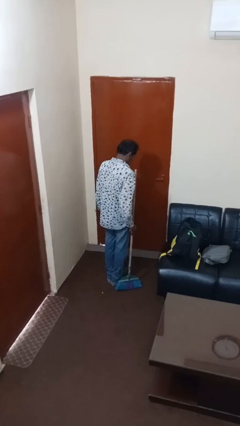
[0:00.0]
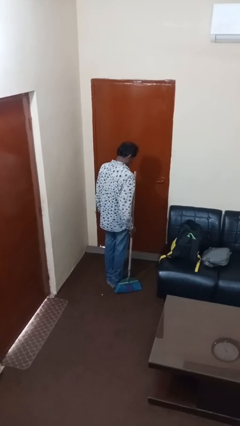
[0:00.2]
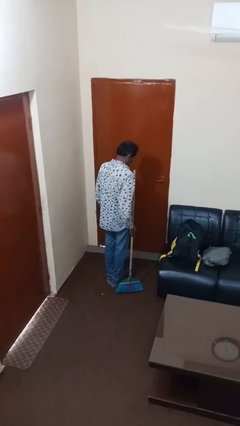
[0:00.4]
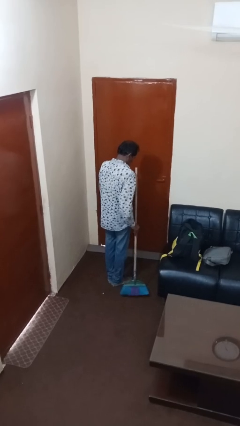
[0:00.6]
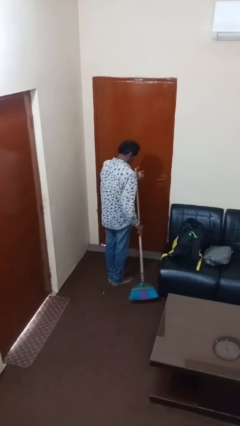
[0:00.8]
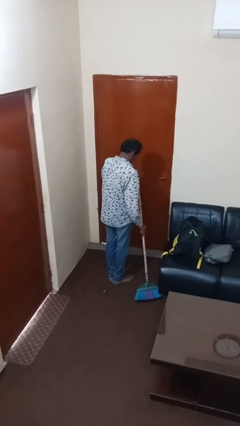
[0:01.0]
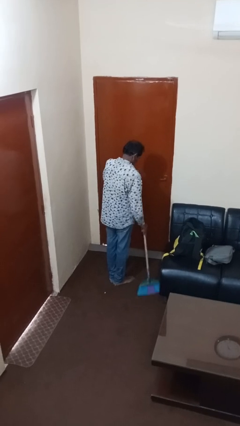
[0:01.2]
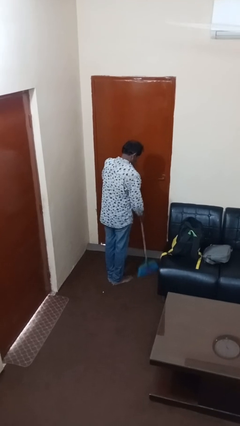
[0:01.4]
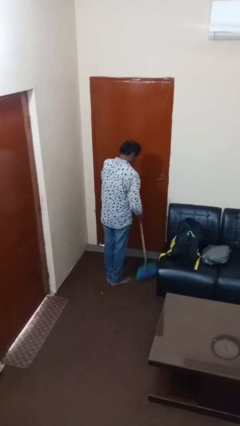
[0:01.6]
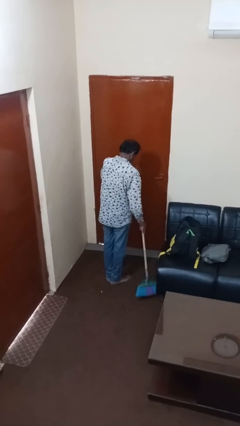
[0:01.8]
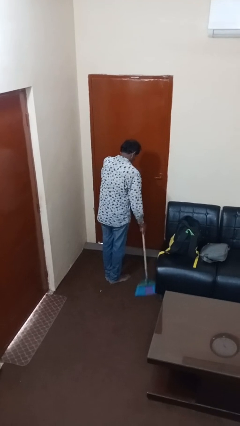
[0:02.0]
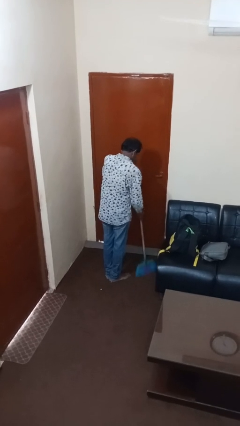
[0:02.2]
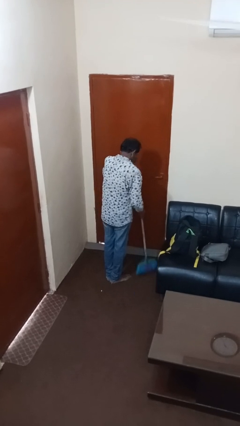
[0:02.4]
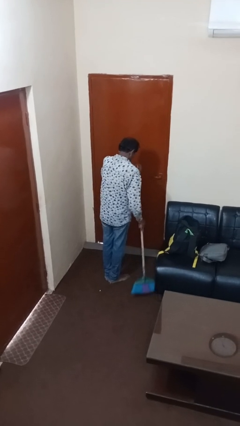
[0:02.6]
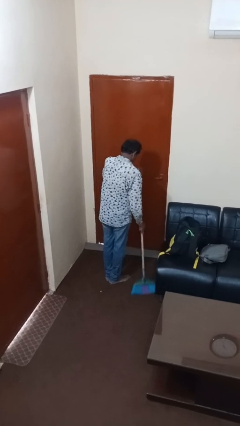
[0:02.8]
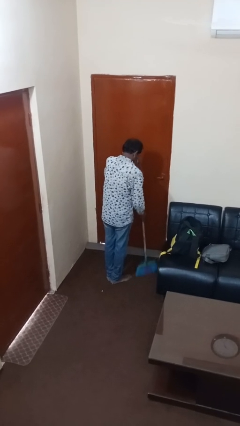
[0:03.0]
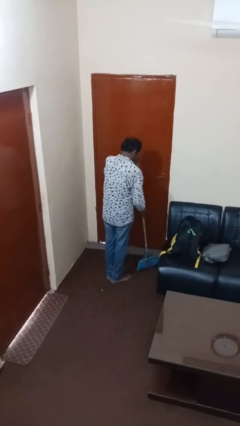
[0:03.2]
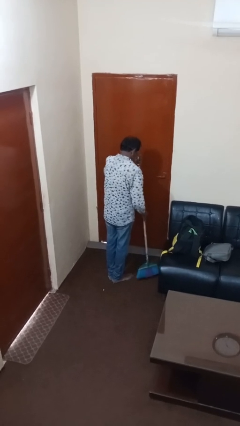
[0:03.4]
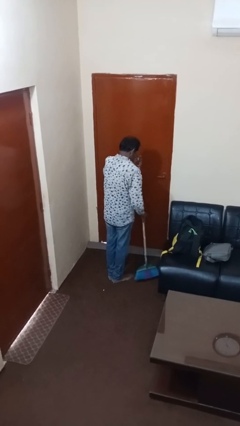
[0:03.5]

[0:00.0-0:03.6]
person sweeps floor

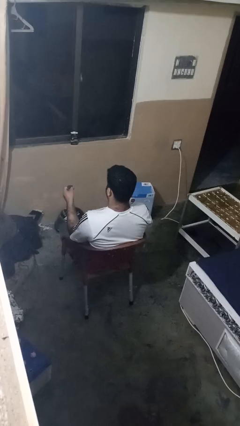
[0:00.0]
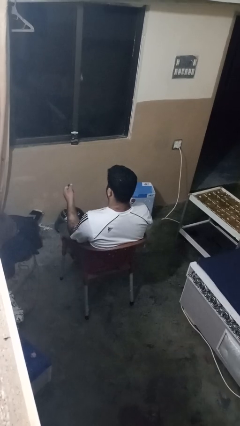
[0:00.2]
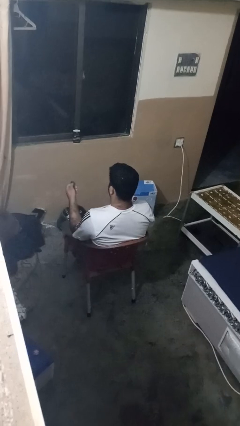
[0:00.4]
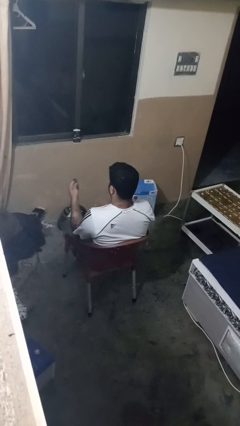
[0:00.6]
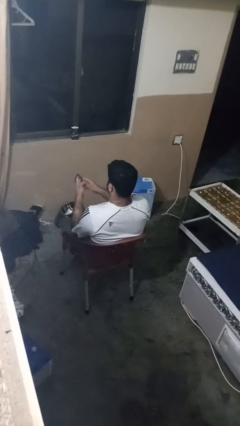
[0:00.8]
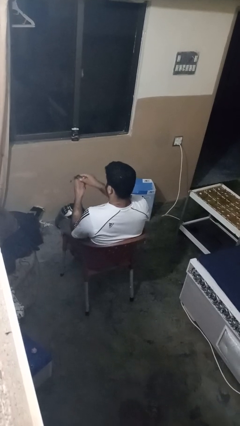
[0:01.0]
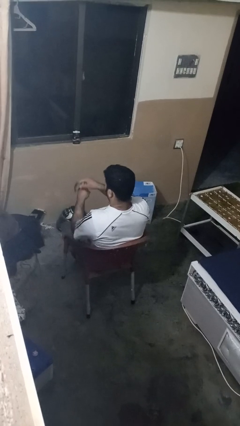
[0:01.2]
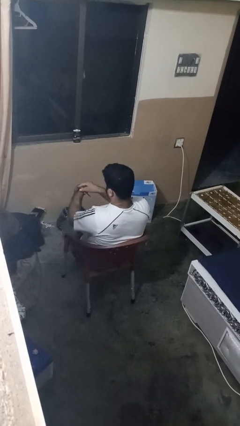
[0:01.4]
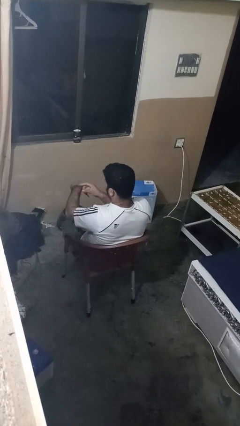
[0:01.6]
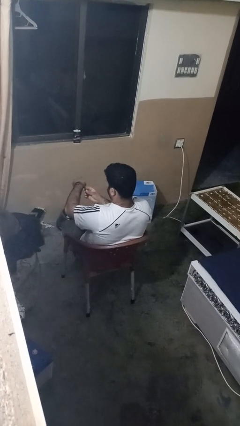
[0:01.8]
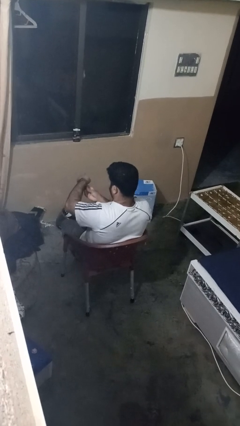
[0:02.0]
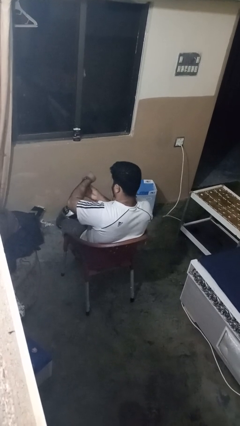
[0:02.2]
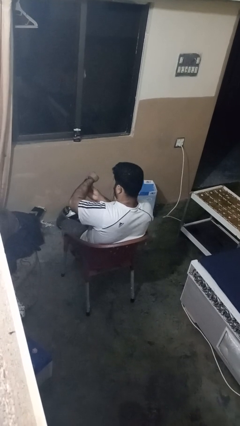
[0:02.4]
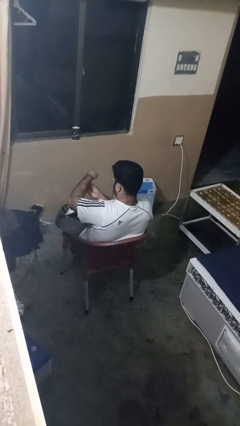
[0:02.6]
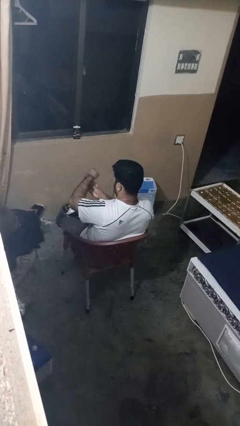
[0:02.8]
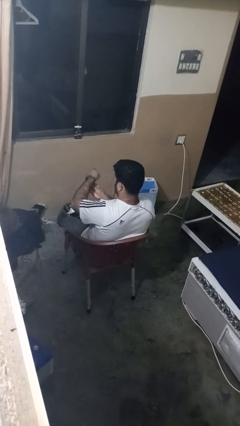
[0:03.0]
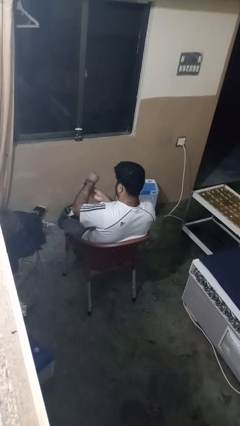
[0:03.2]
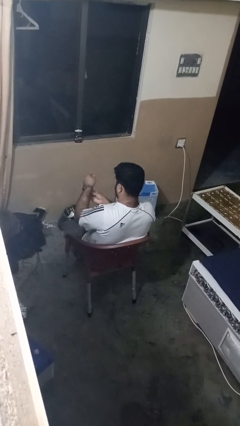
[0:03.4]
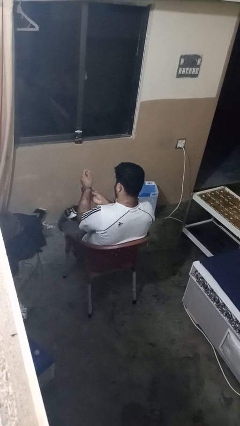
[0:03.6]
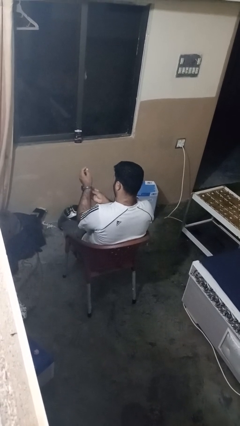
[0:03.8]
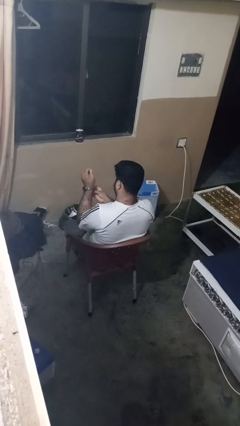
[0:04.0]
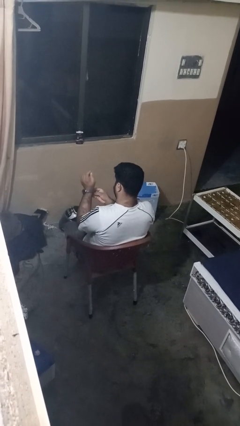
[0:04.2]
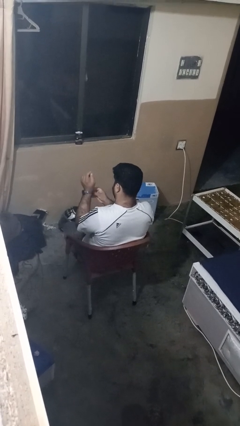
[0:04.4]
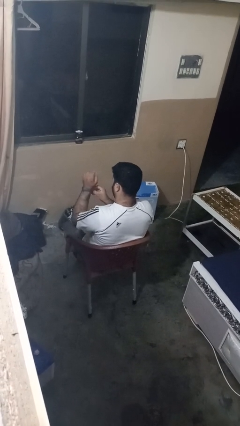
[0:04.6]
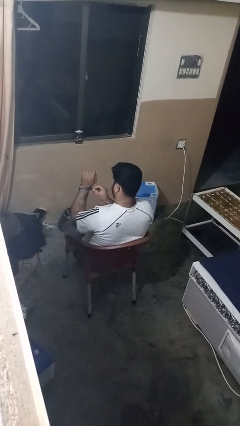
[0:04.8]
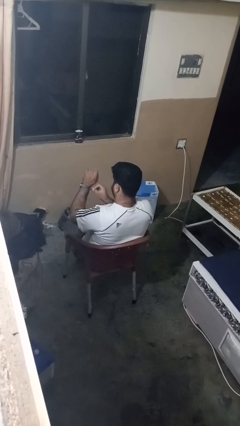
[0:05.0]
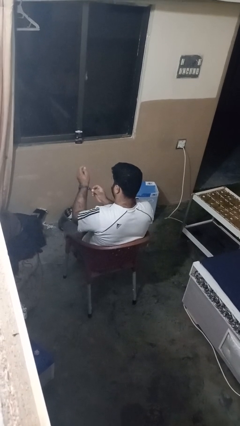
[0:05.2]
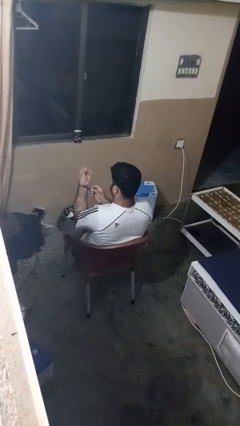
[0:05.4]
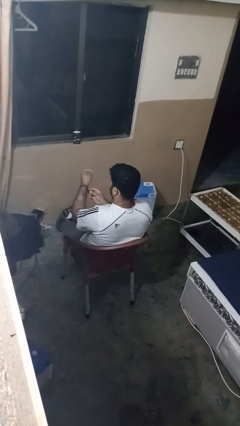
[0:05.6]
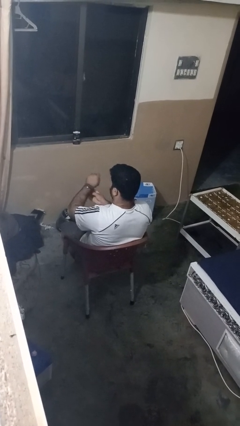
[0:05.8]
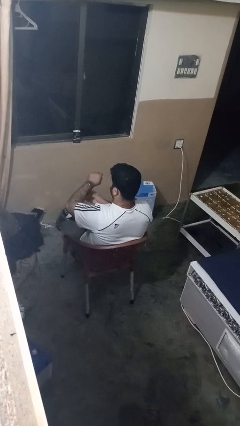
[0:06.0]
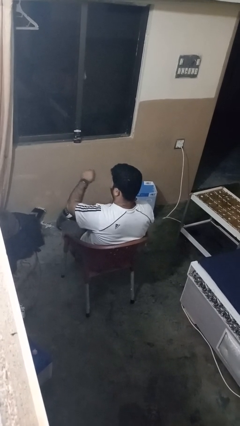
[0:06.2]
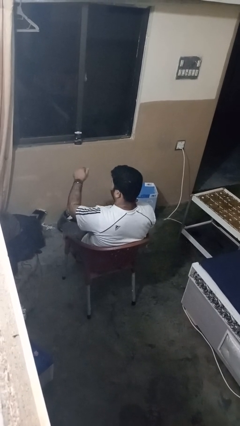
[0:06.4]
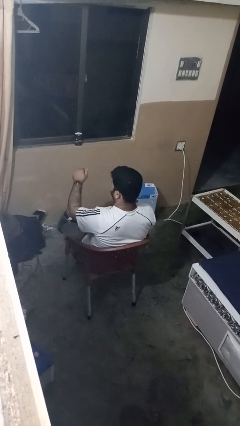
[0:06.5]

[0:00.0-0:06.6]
person puts on wristwatch

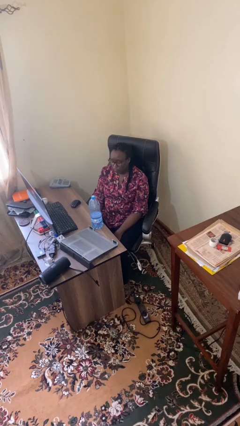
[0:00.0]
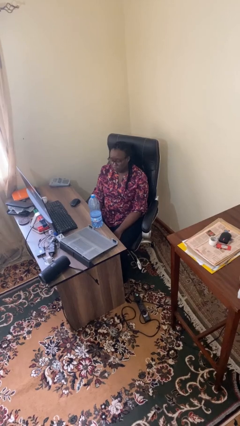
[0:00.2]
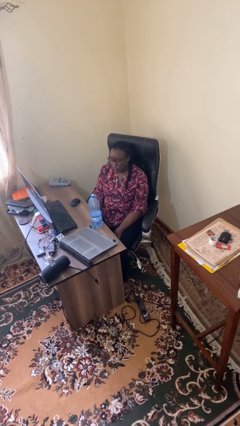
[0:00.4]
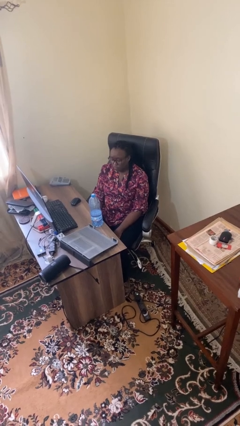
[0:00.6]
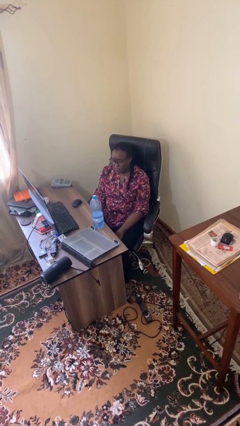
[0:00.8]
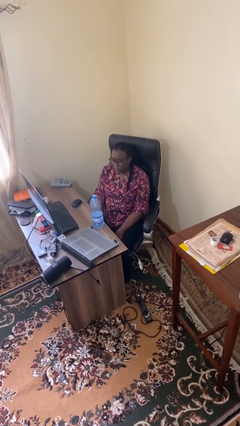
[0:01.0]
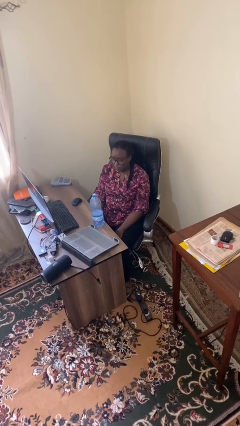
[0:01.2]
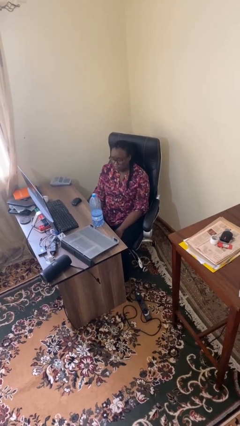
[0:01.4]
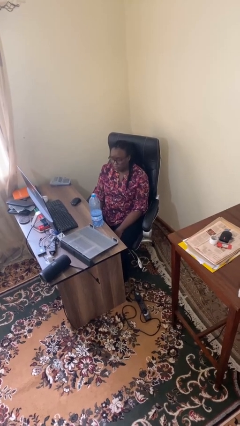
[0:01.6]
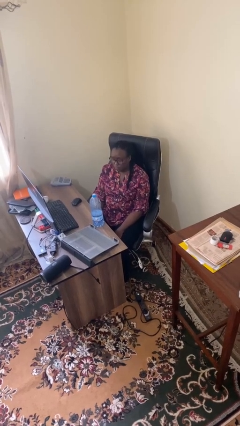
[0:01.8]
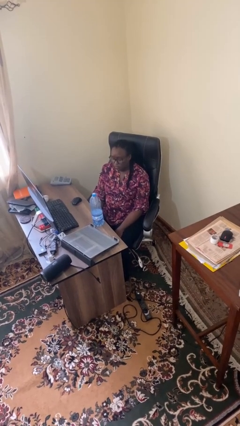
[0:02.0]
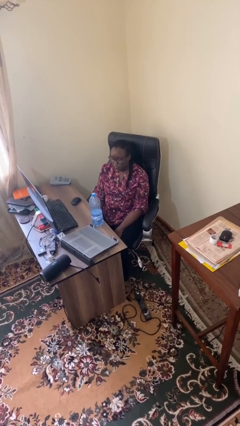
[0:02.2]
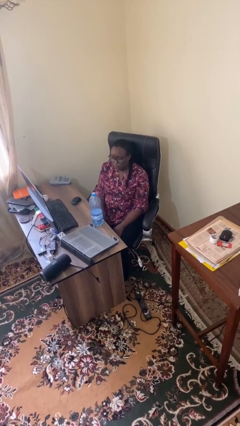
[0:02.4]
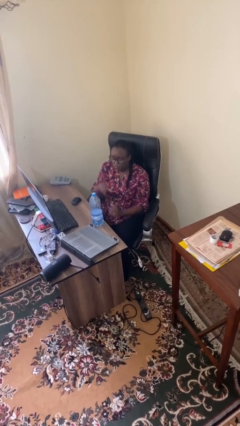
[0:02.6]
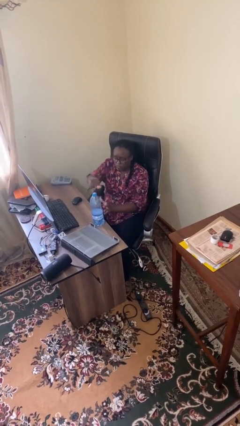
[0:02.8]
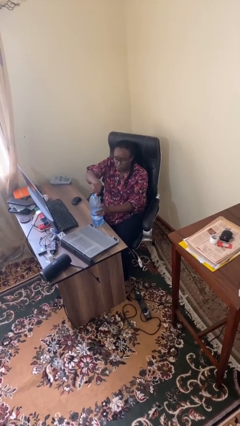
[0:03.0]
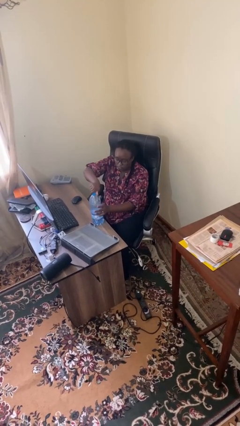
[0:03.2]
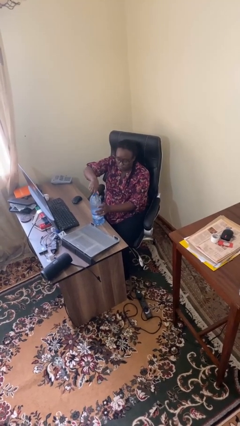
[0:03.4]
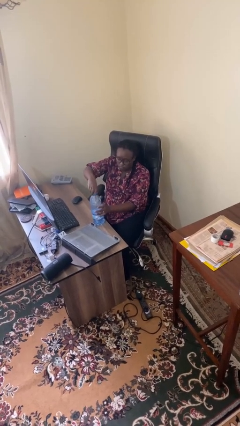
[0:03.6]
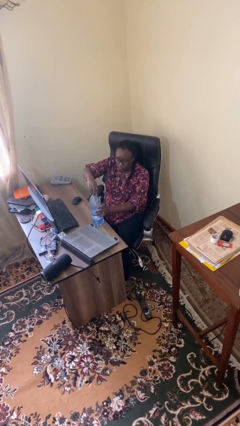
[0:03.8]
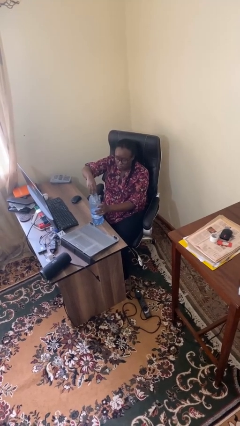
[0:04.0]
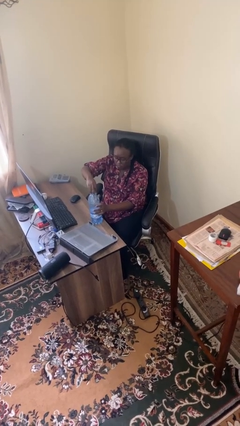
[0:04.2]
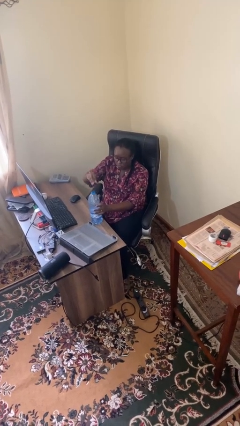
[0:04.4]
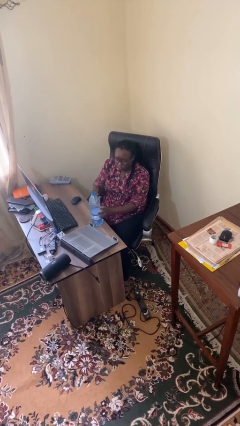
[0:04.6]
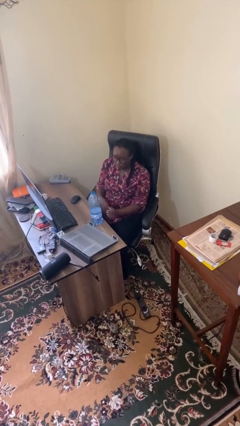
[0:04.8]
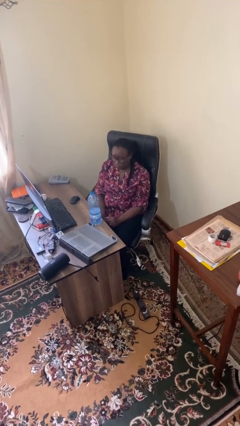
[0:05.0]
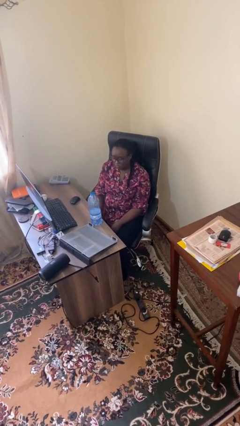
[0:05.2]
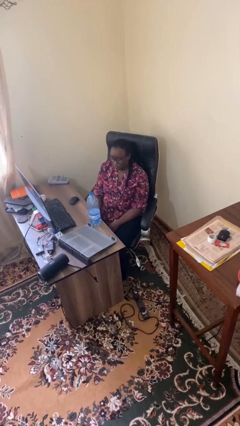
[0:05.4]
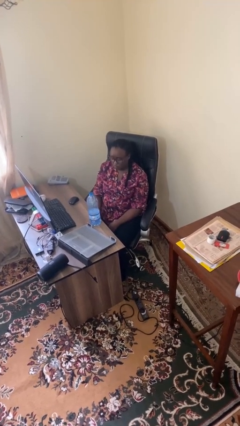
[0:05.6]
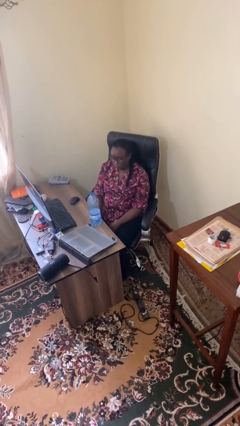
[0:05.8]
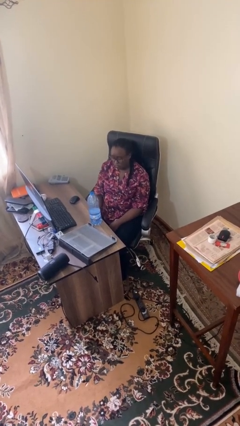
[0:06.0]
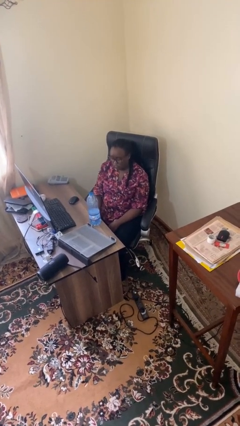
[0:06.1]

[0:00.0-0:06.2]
person unscrews lid from bottle

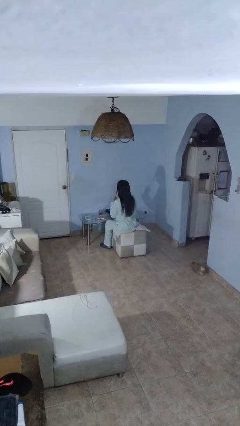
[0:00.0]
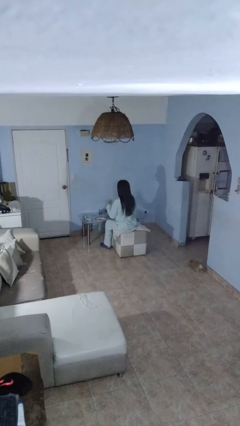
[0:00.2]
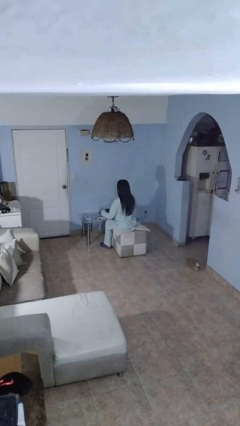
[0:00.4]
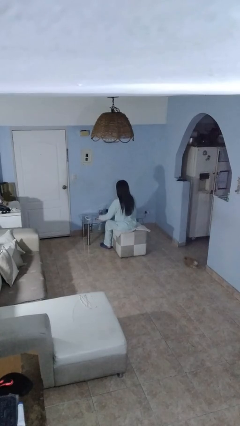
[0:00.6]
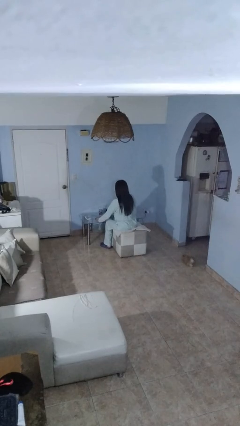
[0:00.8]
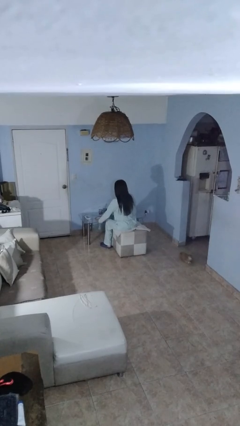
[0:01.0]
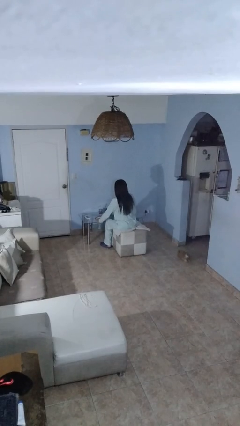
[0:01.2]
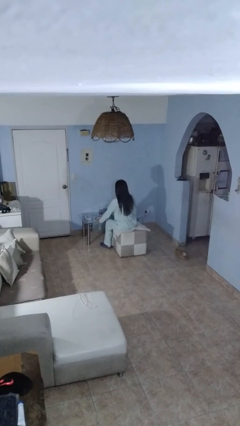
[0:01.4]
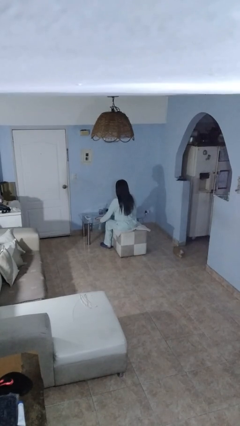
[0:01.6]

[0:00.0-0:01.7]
person turns off lamp
